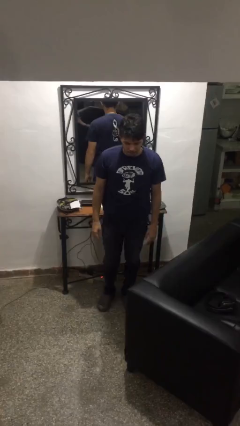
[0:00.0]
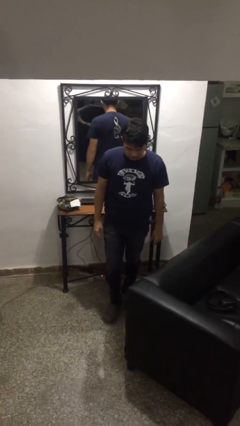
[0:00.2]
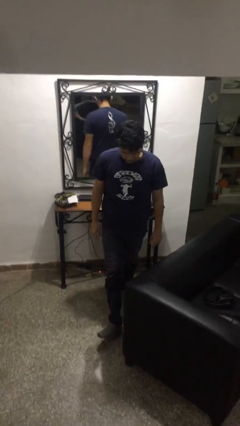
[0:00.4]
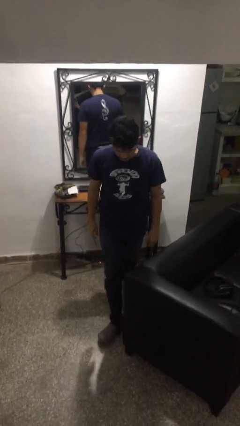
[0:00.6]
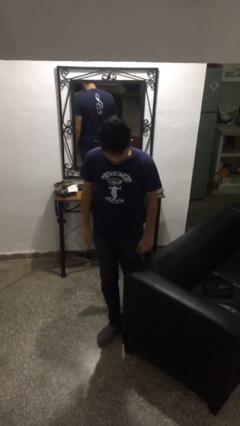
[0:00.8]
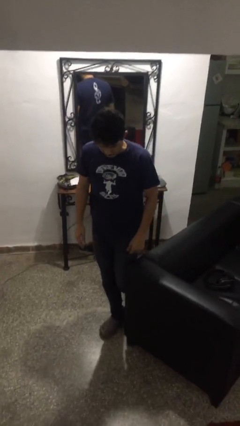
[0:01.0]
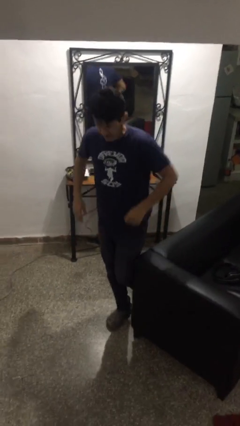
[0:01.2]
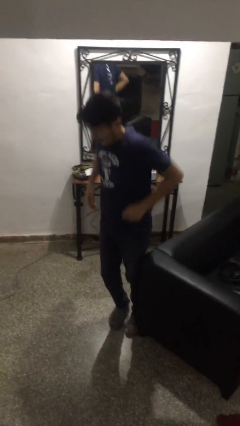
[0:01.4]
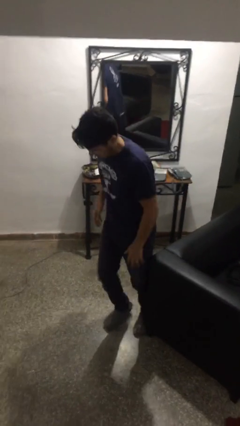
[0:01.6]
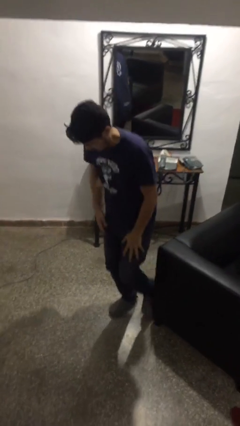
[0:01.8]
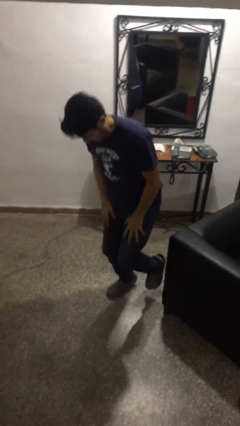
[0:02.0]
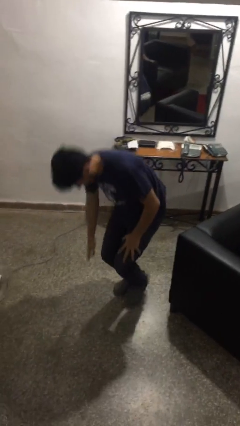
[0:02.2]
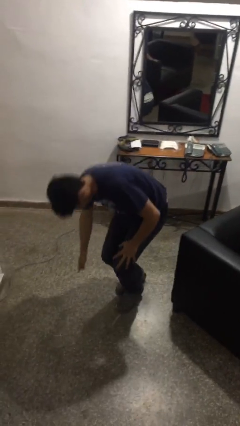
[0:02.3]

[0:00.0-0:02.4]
person trips on object on floor

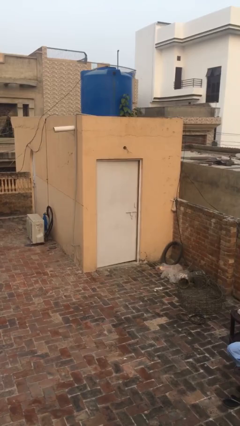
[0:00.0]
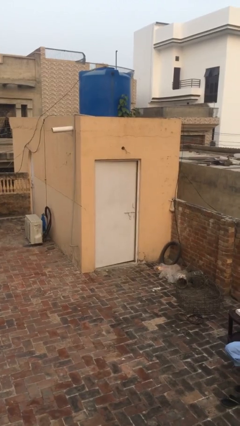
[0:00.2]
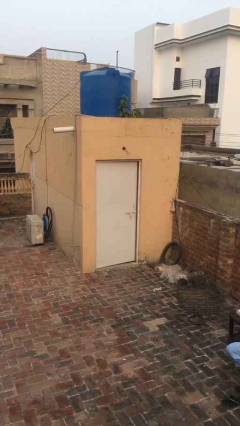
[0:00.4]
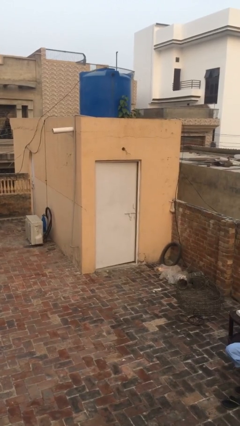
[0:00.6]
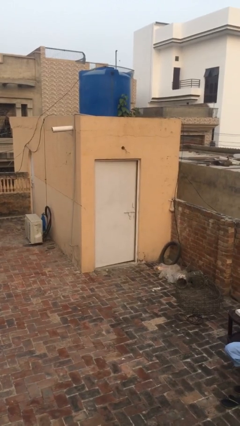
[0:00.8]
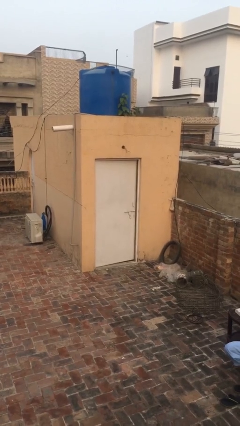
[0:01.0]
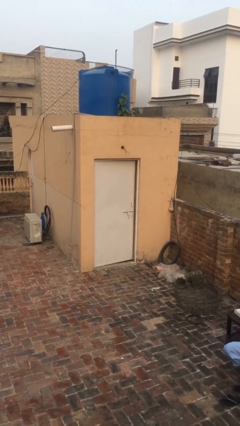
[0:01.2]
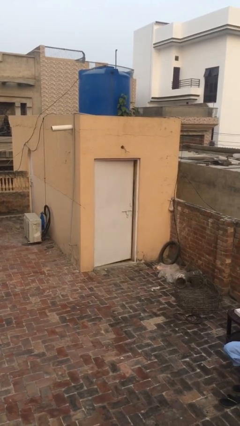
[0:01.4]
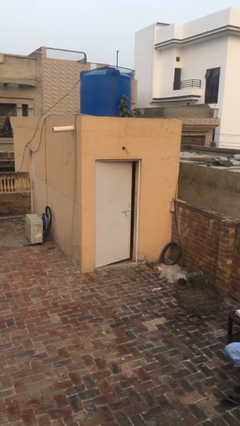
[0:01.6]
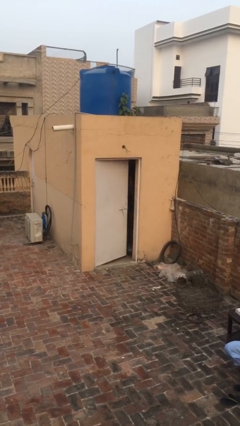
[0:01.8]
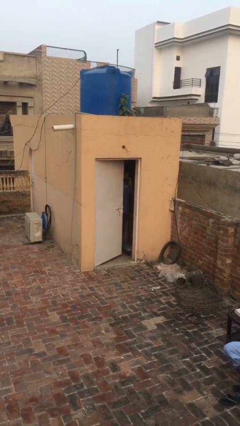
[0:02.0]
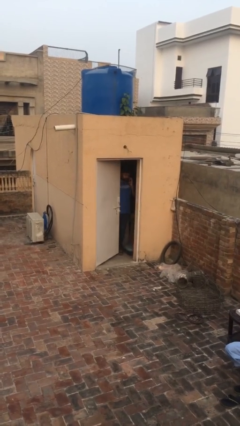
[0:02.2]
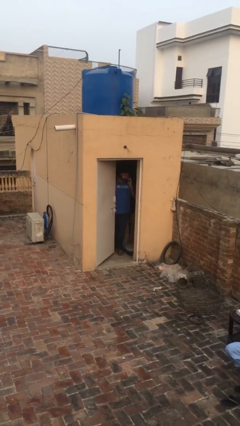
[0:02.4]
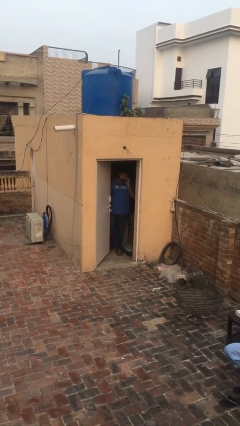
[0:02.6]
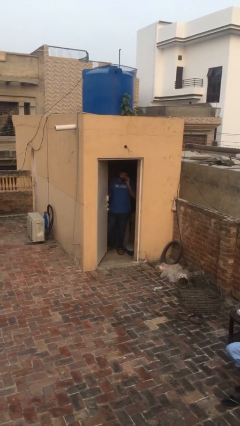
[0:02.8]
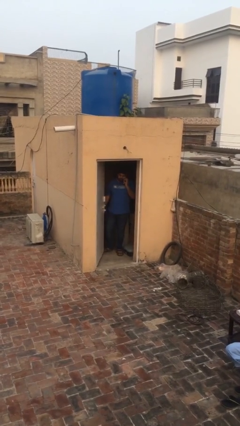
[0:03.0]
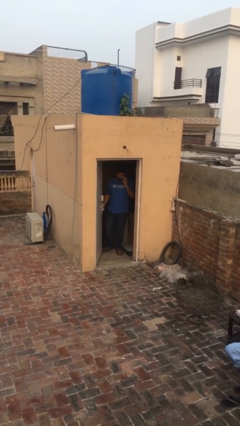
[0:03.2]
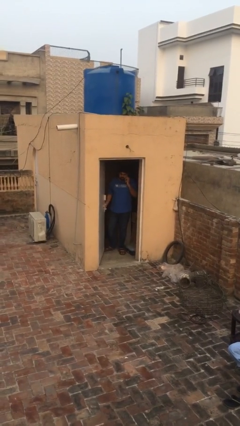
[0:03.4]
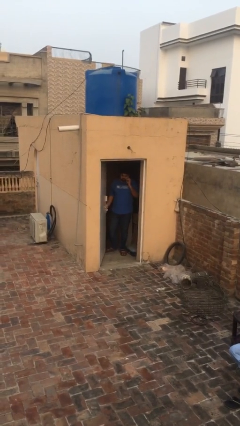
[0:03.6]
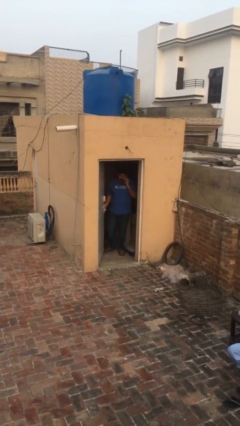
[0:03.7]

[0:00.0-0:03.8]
person opens facility door

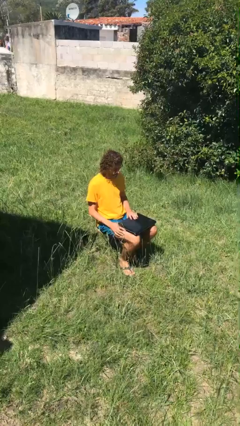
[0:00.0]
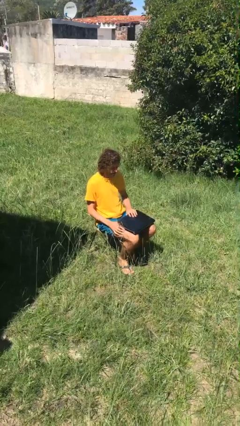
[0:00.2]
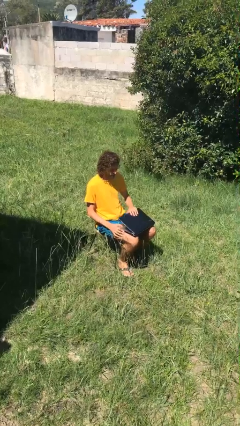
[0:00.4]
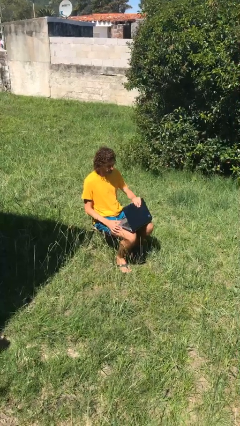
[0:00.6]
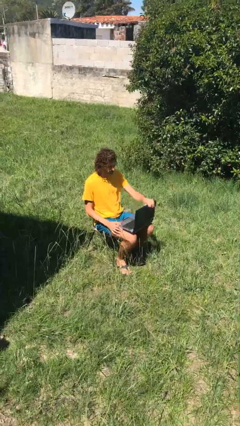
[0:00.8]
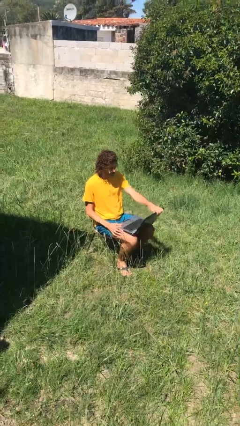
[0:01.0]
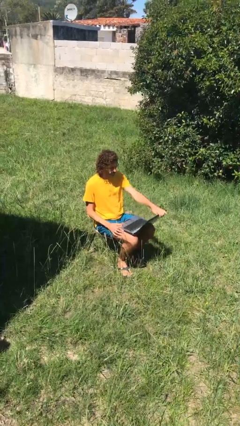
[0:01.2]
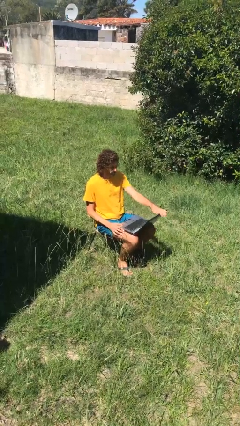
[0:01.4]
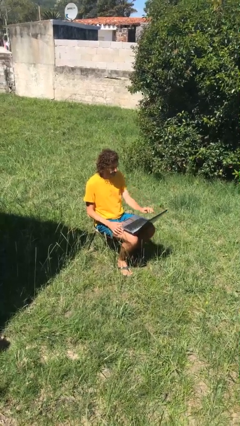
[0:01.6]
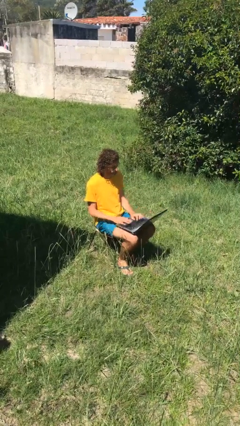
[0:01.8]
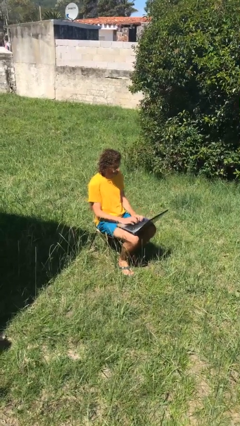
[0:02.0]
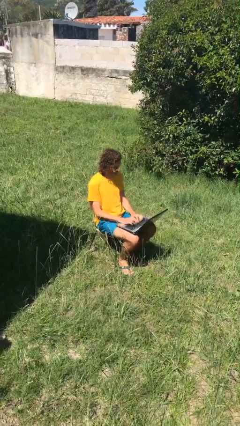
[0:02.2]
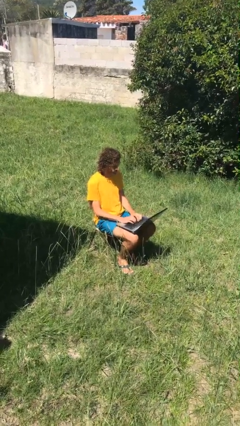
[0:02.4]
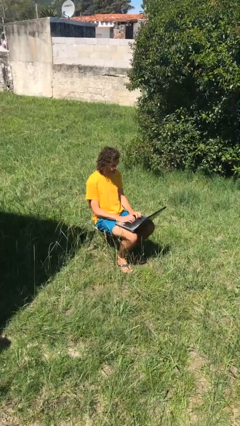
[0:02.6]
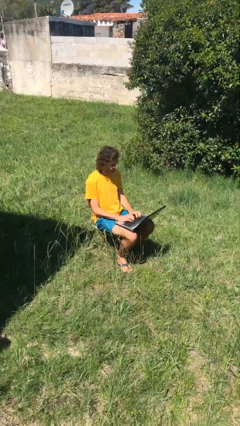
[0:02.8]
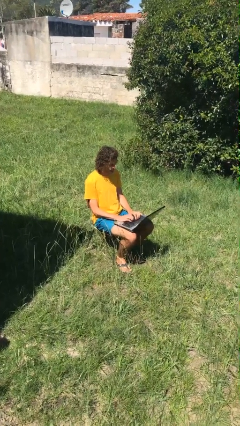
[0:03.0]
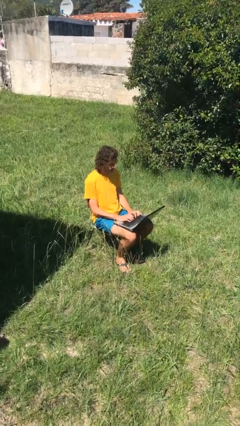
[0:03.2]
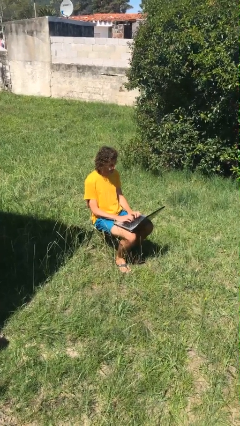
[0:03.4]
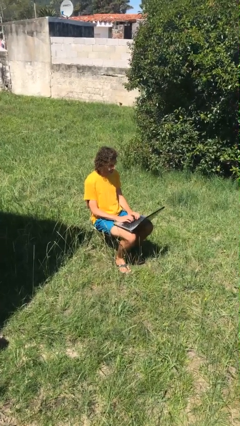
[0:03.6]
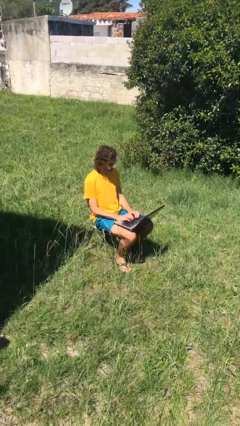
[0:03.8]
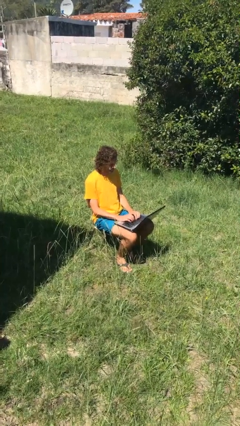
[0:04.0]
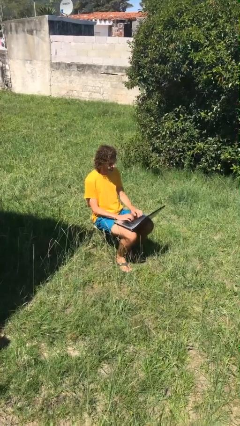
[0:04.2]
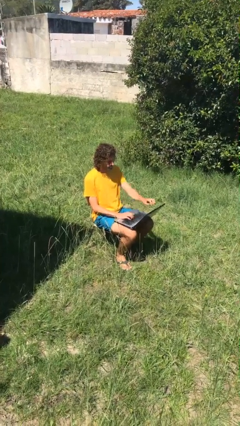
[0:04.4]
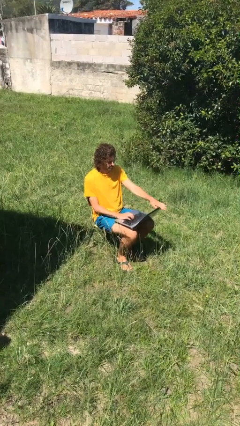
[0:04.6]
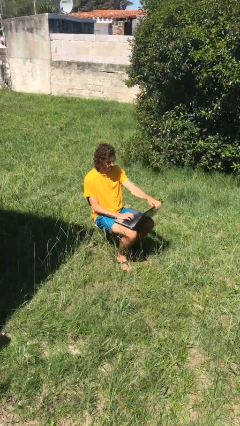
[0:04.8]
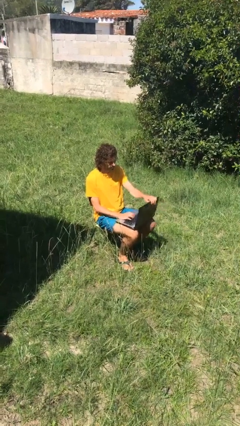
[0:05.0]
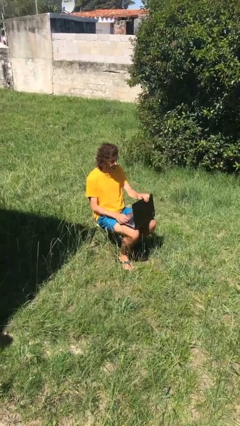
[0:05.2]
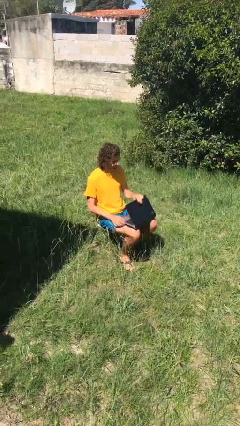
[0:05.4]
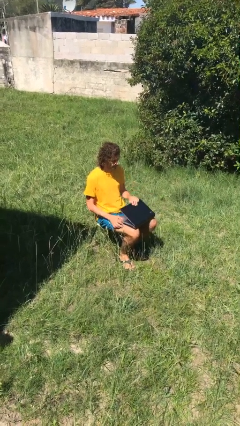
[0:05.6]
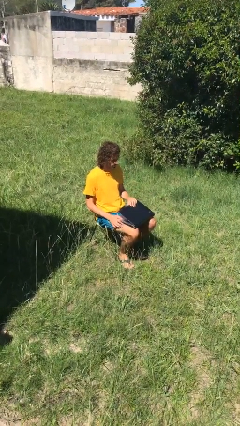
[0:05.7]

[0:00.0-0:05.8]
person interacts with laptop

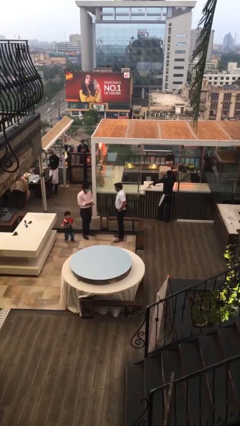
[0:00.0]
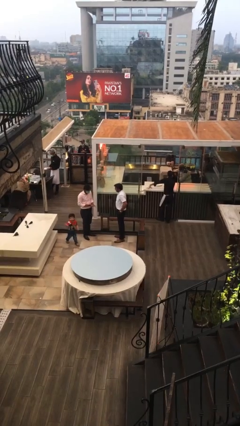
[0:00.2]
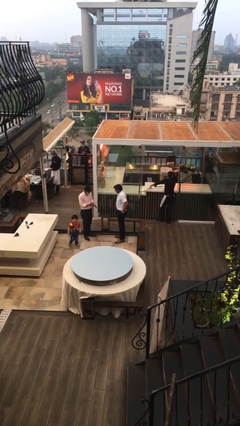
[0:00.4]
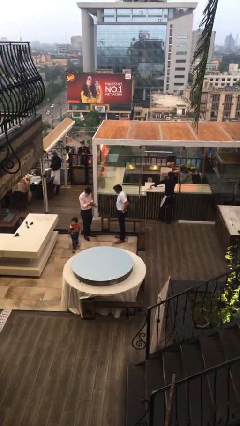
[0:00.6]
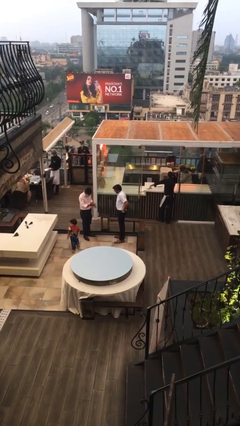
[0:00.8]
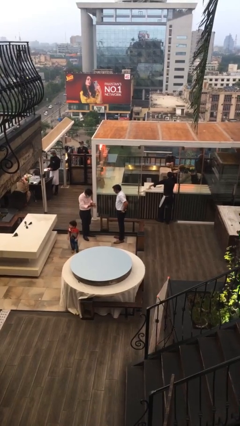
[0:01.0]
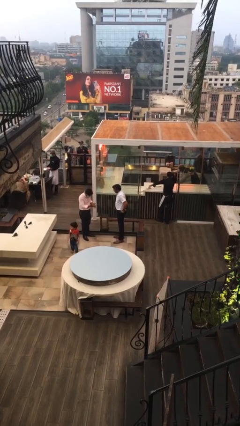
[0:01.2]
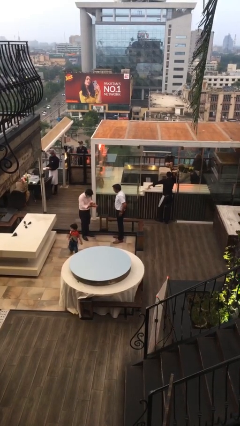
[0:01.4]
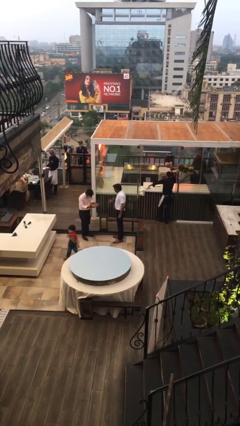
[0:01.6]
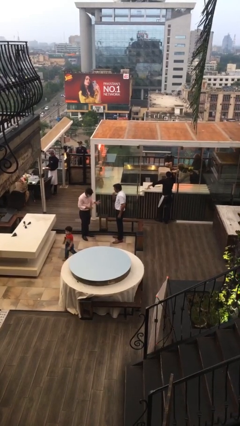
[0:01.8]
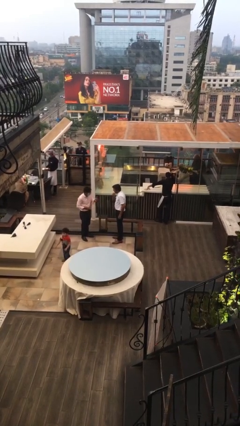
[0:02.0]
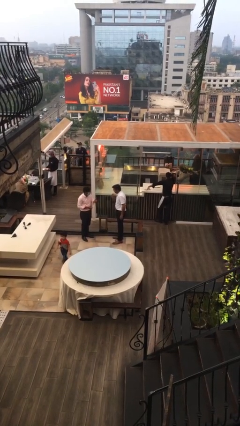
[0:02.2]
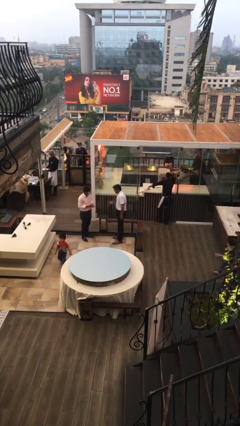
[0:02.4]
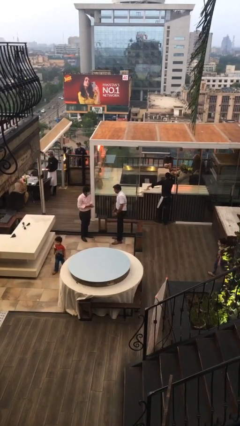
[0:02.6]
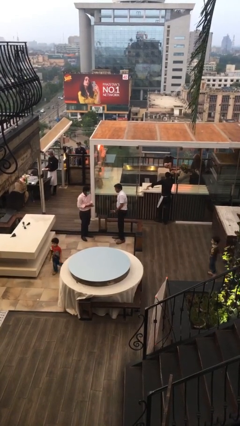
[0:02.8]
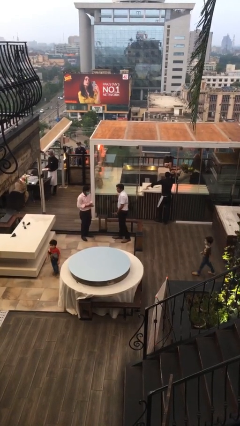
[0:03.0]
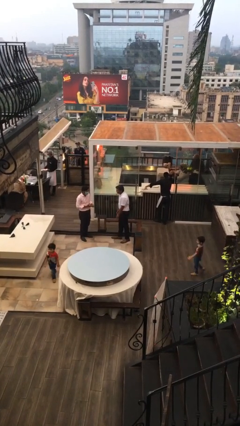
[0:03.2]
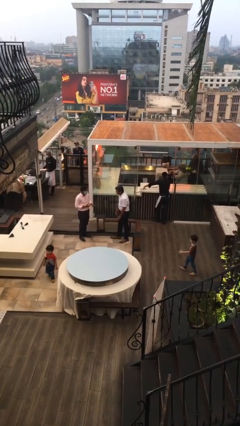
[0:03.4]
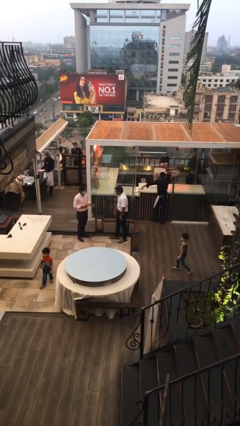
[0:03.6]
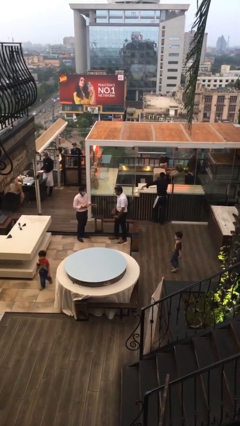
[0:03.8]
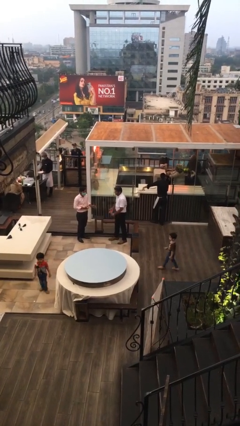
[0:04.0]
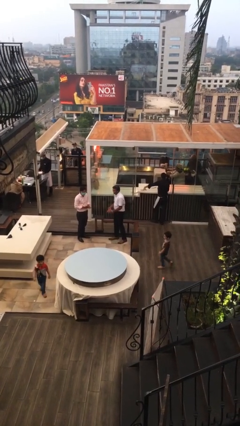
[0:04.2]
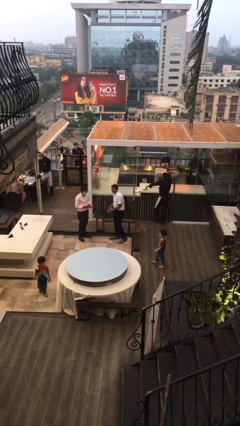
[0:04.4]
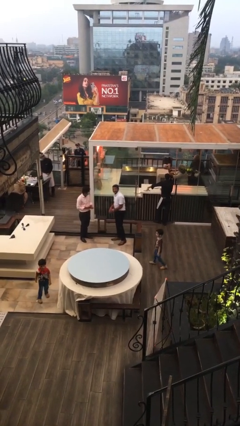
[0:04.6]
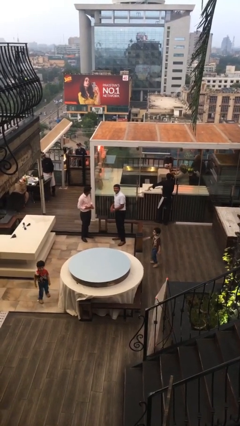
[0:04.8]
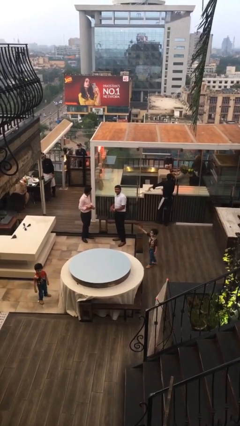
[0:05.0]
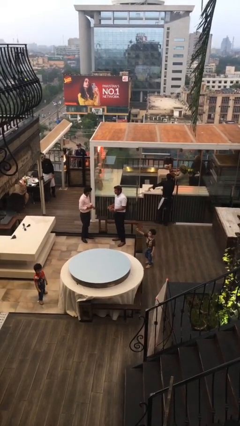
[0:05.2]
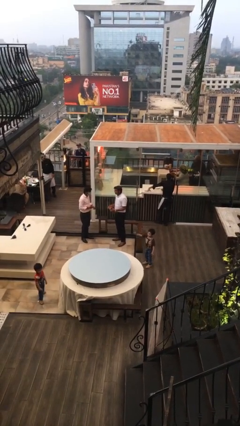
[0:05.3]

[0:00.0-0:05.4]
person talks to person
